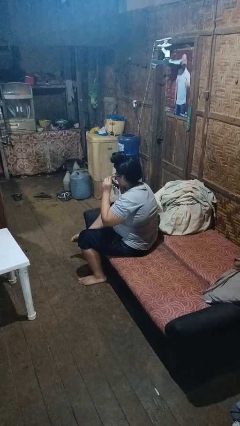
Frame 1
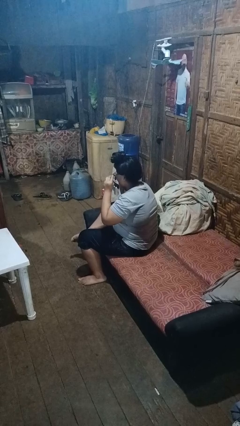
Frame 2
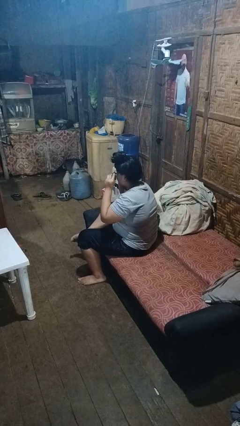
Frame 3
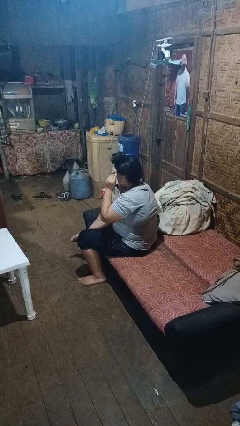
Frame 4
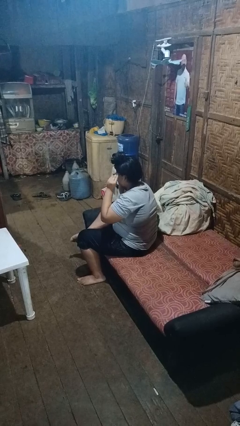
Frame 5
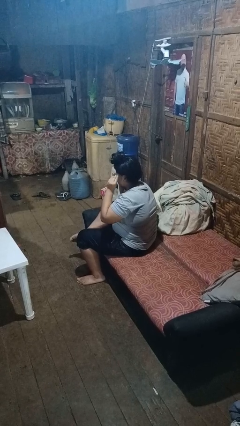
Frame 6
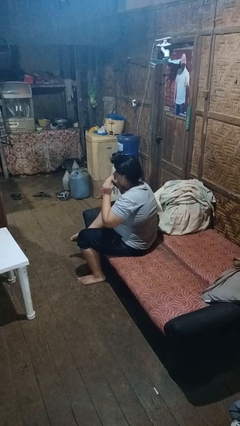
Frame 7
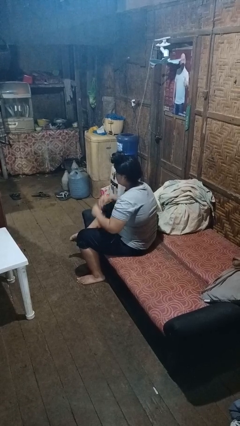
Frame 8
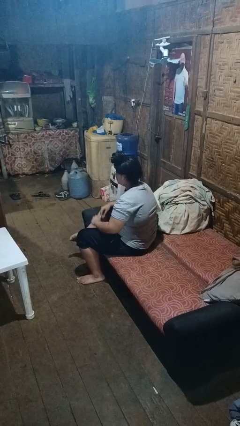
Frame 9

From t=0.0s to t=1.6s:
person puts on glasses

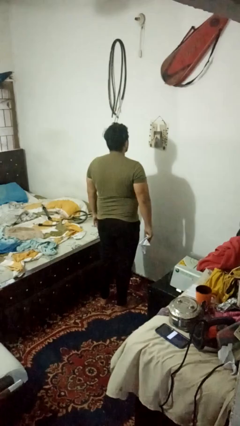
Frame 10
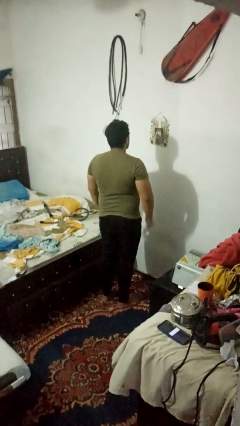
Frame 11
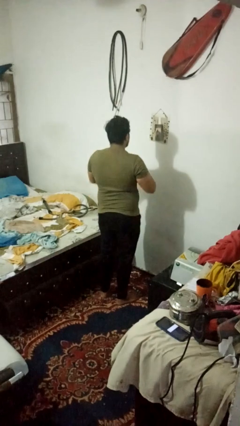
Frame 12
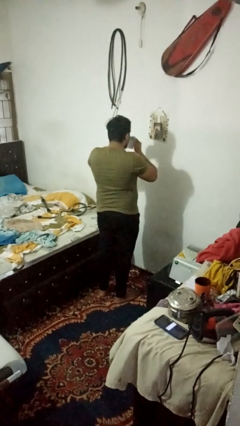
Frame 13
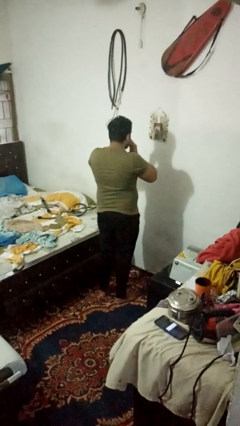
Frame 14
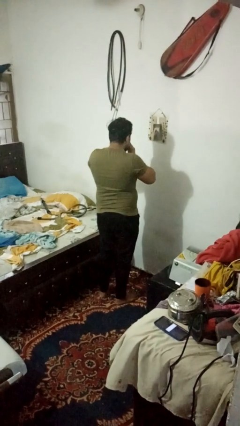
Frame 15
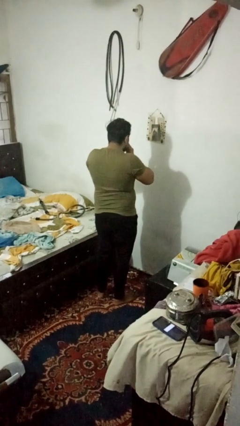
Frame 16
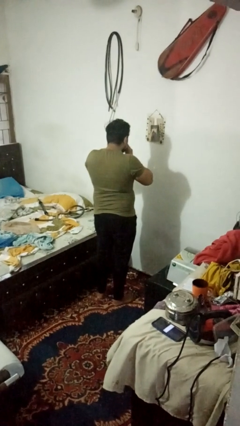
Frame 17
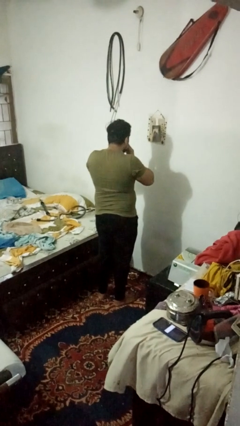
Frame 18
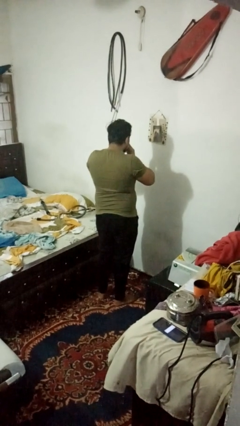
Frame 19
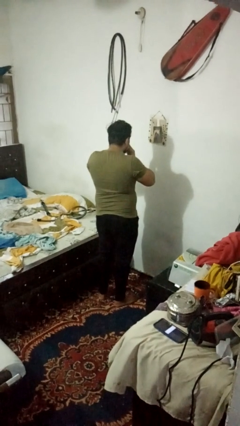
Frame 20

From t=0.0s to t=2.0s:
person blows nose

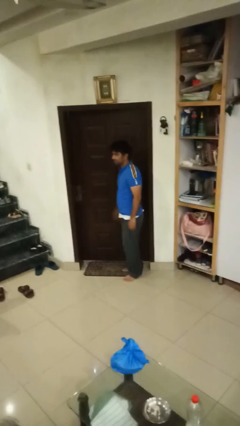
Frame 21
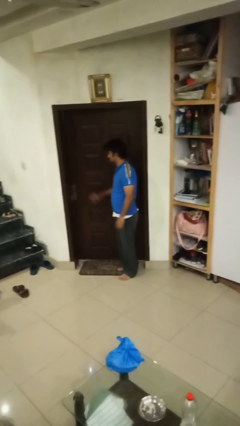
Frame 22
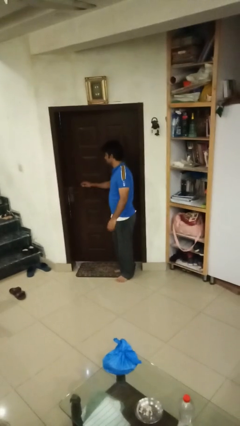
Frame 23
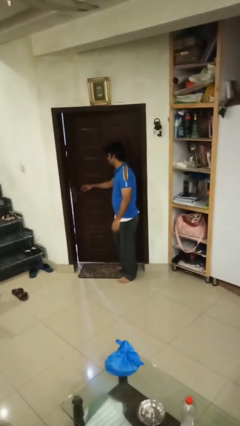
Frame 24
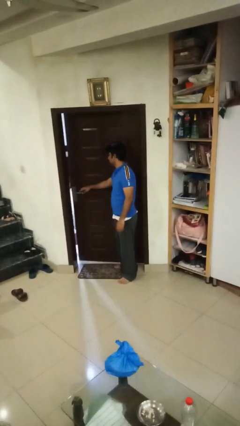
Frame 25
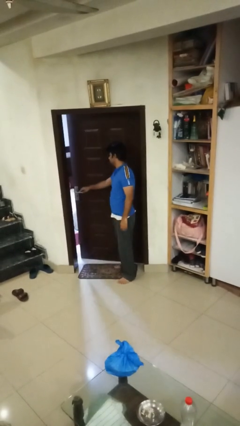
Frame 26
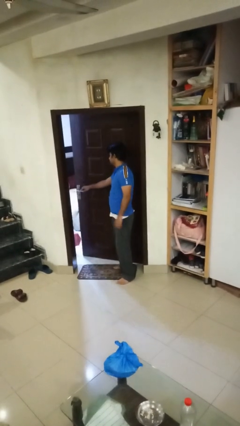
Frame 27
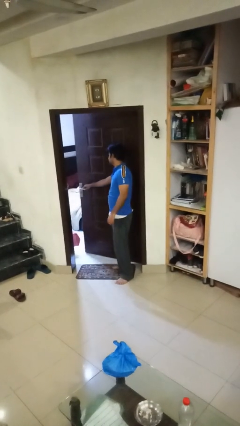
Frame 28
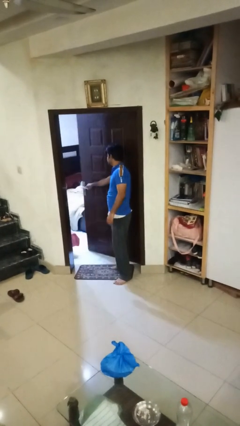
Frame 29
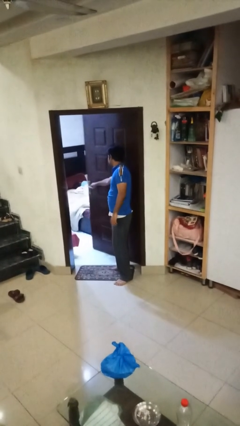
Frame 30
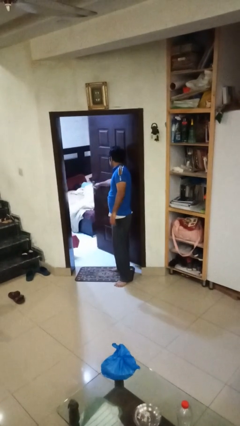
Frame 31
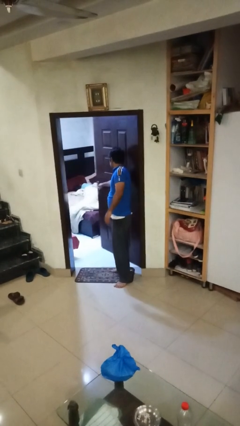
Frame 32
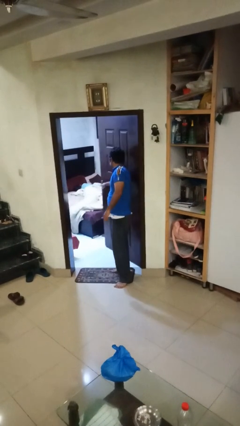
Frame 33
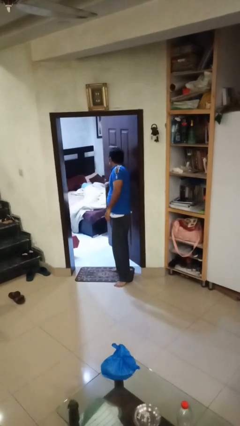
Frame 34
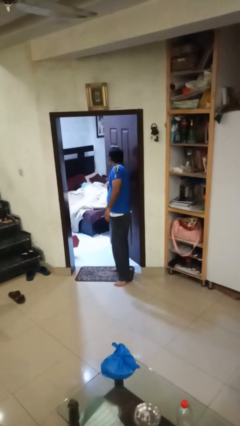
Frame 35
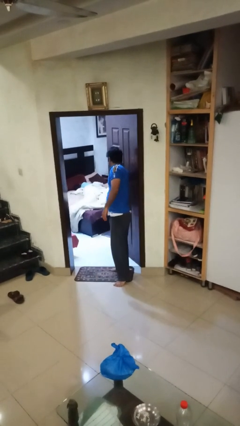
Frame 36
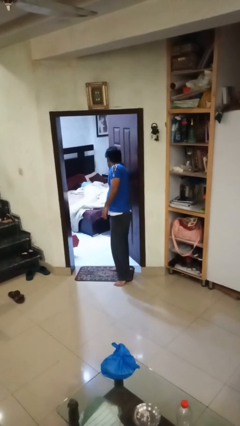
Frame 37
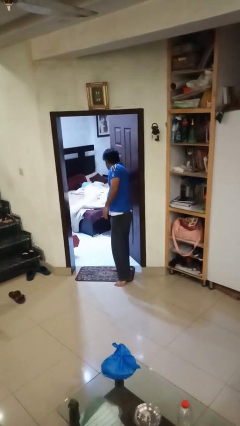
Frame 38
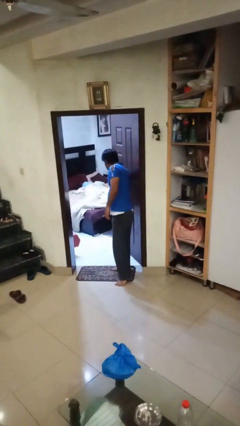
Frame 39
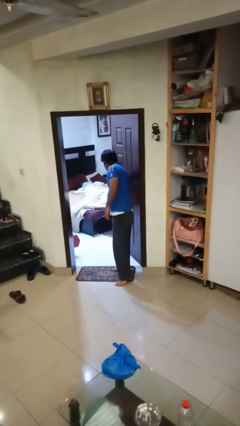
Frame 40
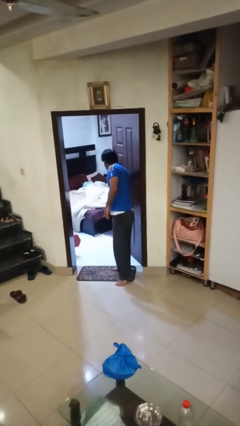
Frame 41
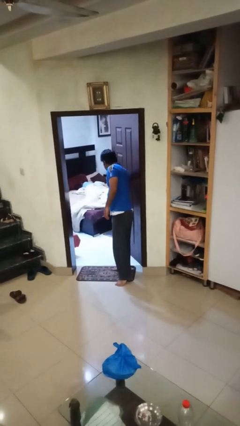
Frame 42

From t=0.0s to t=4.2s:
person opens facility door

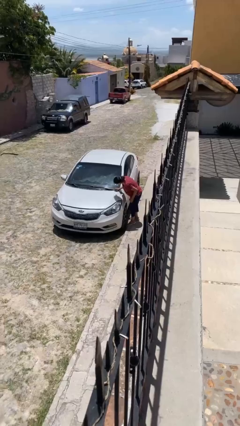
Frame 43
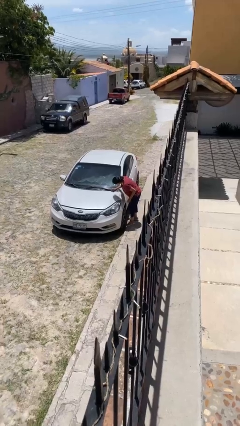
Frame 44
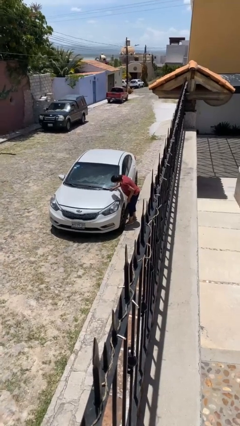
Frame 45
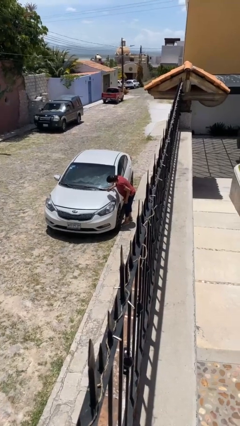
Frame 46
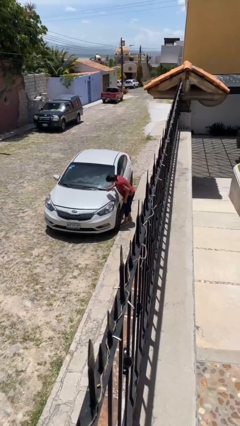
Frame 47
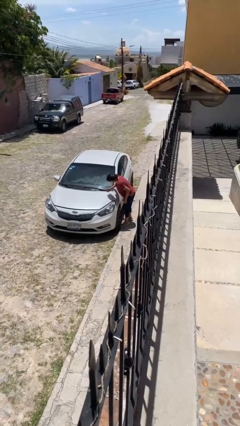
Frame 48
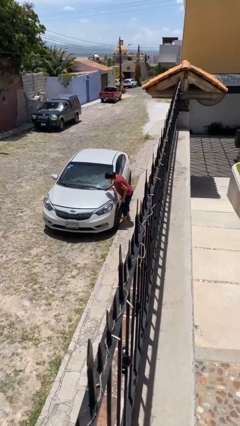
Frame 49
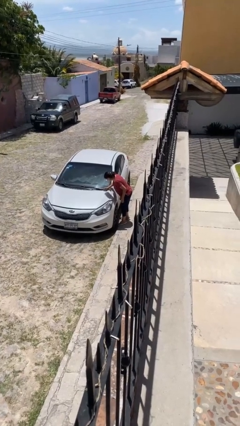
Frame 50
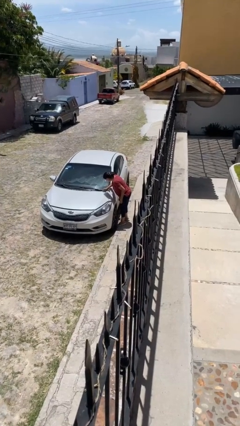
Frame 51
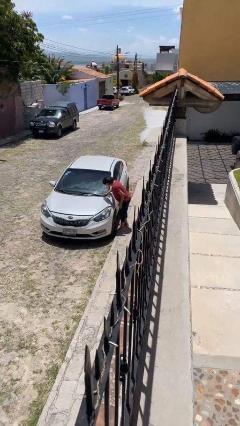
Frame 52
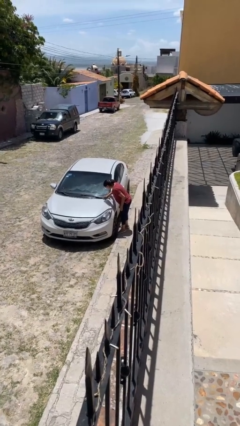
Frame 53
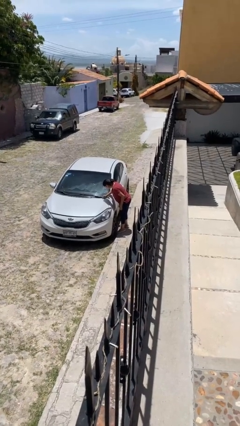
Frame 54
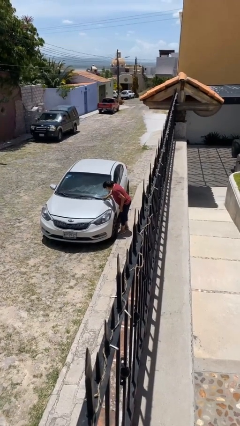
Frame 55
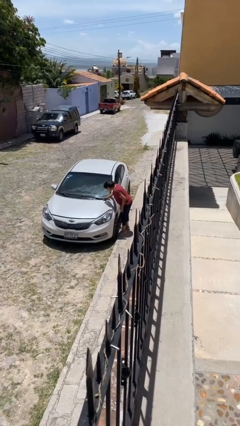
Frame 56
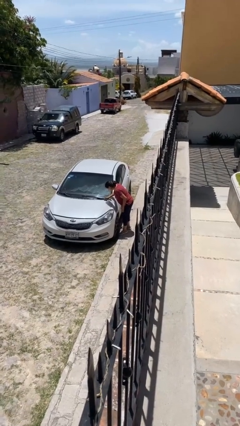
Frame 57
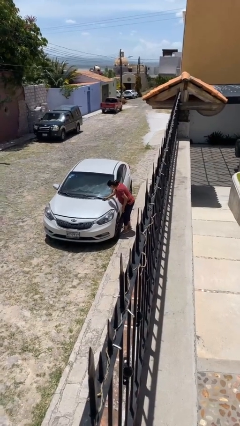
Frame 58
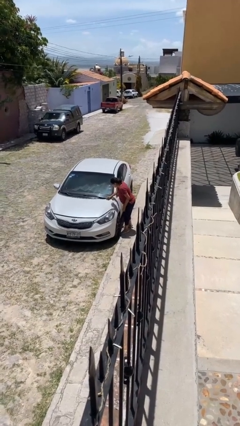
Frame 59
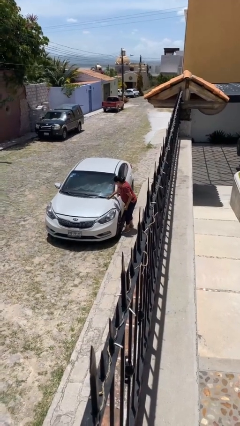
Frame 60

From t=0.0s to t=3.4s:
person polishes car with rag

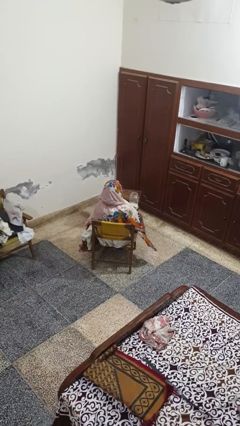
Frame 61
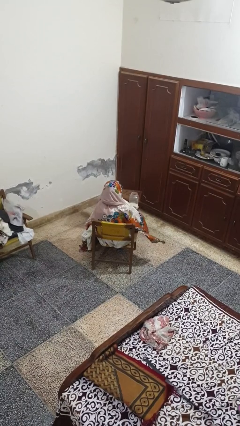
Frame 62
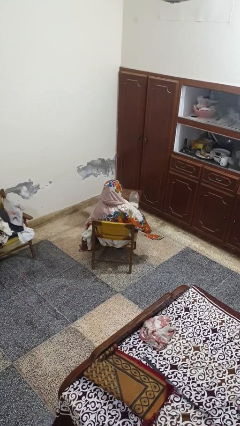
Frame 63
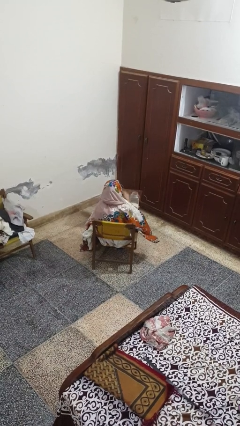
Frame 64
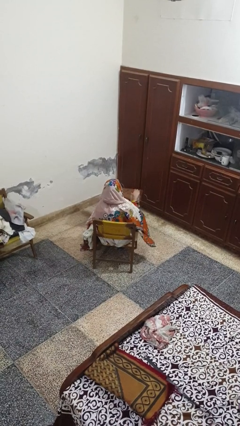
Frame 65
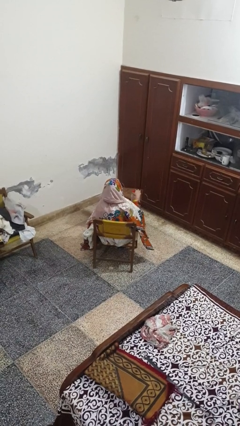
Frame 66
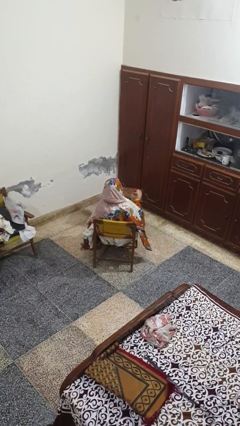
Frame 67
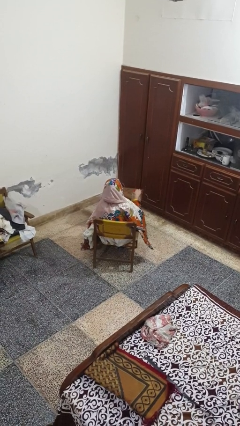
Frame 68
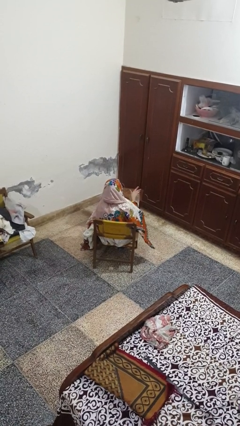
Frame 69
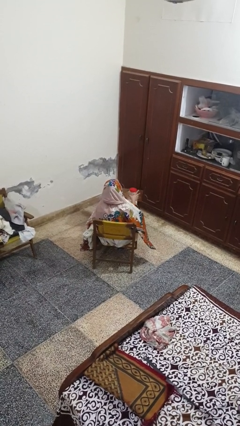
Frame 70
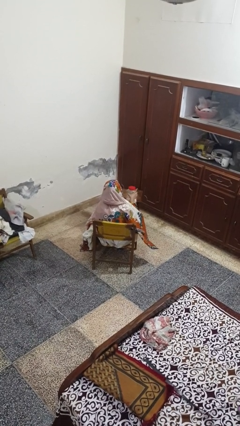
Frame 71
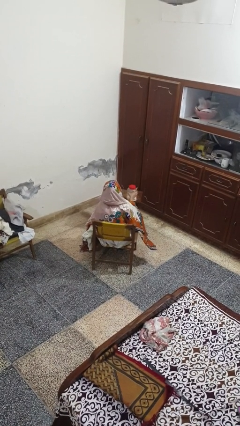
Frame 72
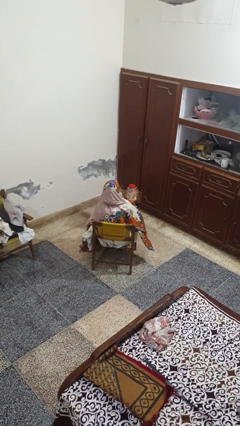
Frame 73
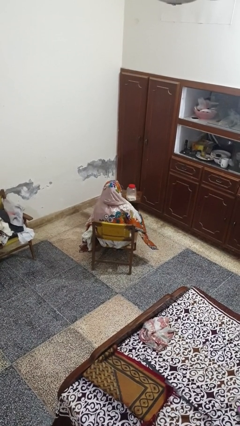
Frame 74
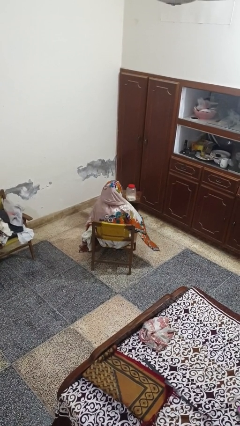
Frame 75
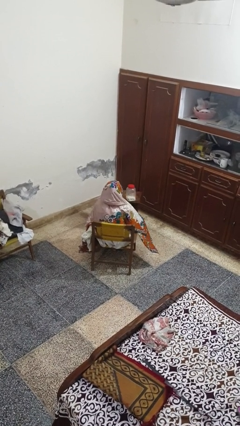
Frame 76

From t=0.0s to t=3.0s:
person closes jar

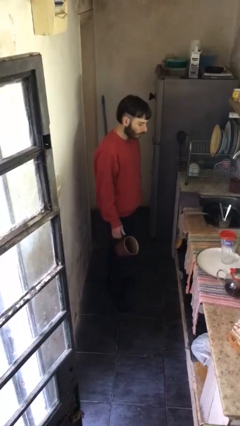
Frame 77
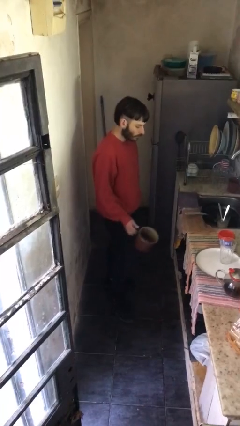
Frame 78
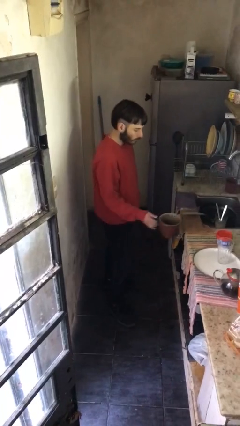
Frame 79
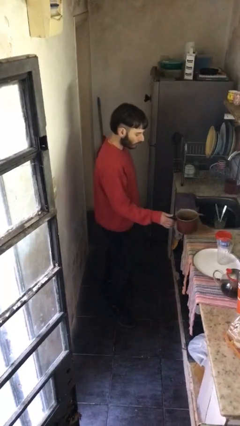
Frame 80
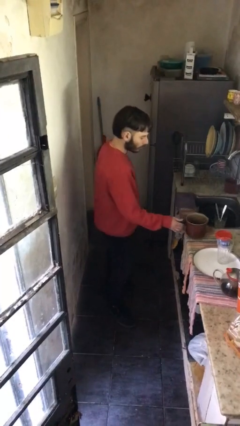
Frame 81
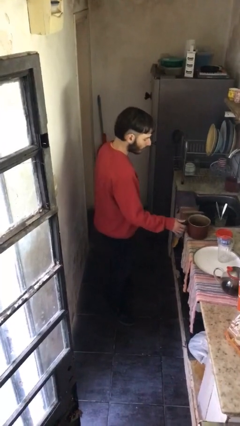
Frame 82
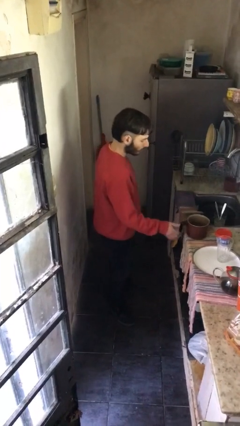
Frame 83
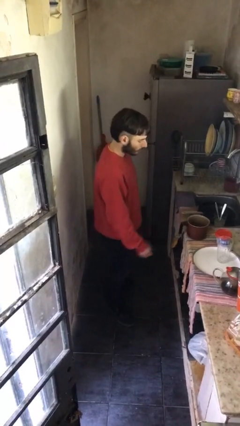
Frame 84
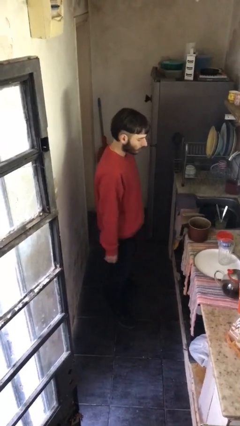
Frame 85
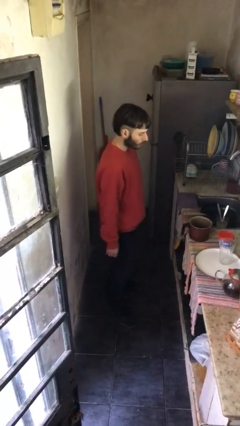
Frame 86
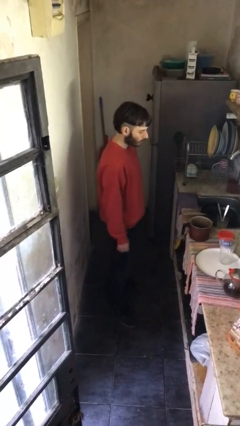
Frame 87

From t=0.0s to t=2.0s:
person puts down object on countertop

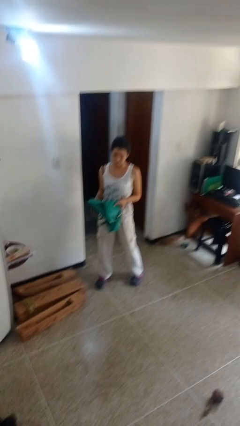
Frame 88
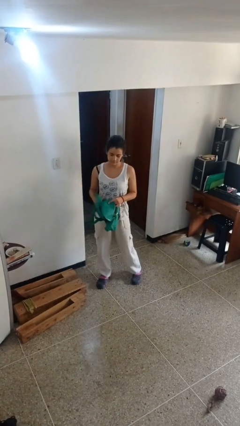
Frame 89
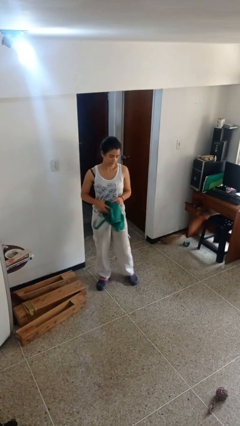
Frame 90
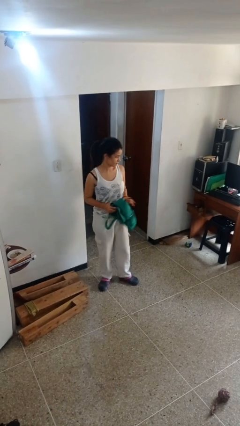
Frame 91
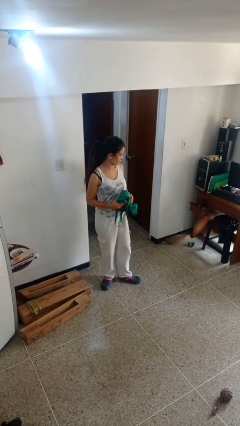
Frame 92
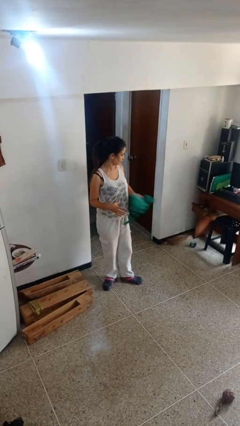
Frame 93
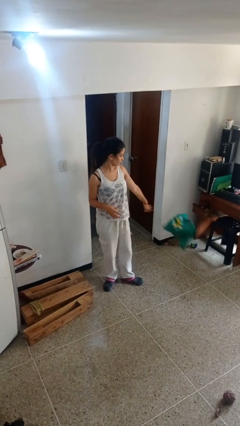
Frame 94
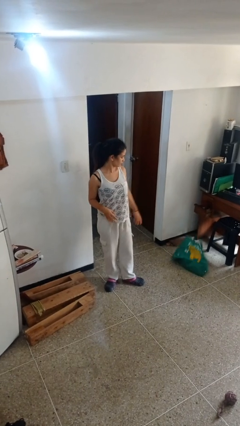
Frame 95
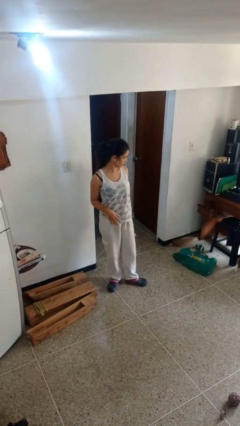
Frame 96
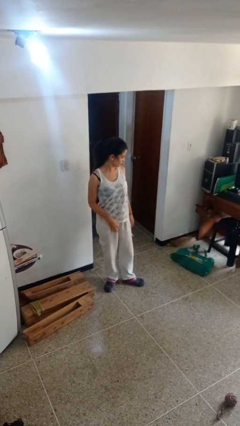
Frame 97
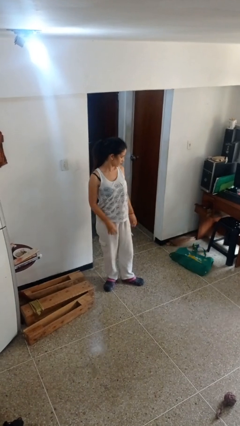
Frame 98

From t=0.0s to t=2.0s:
person throws object to ground
